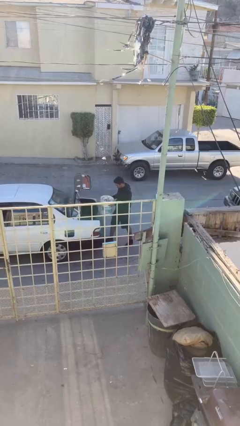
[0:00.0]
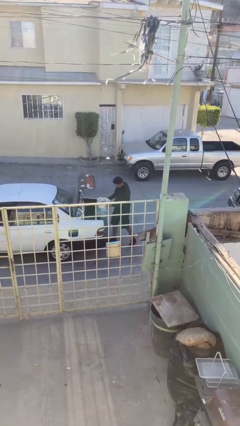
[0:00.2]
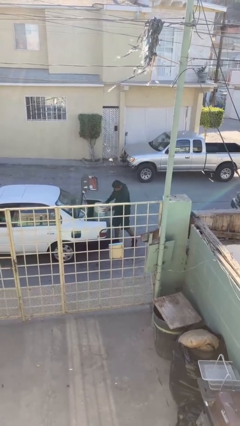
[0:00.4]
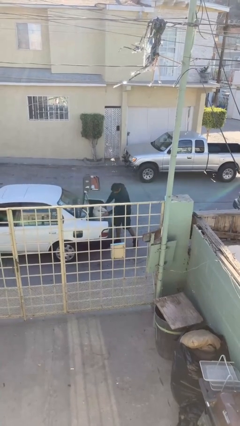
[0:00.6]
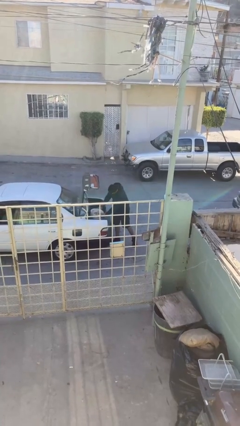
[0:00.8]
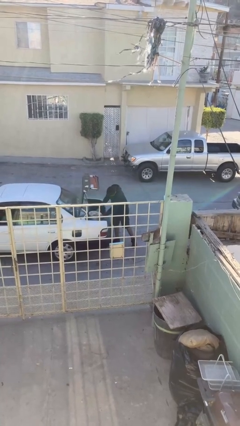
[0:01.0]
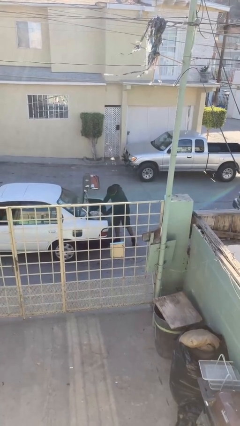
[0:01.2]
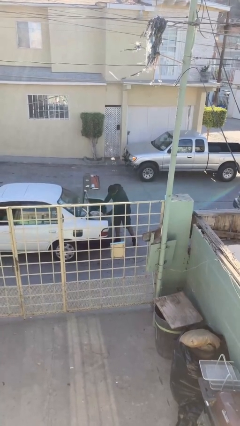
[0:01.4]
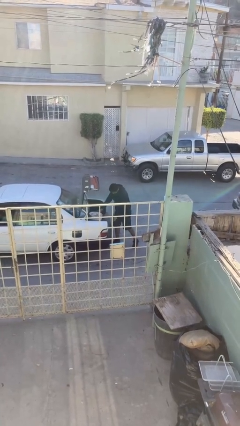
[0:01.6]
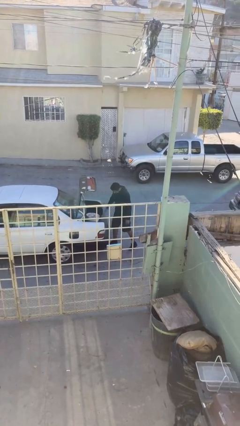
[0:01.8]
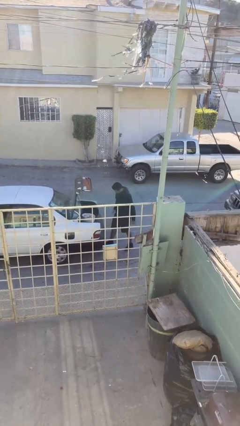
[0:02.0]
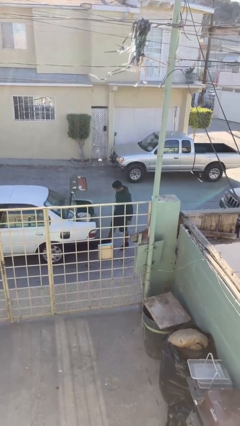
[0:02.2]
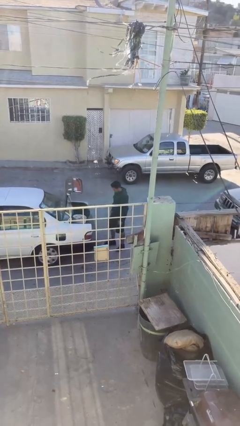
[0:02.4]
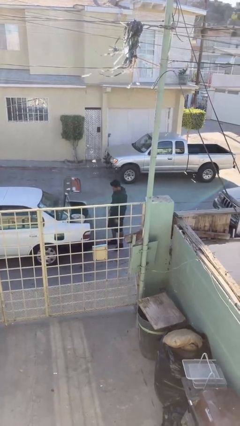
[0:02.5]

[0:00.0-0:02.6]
person loads car

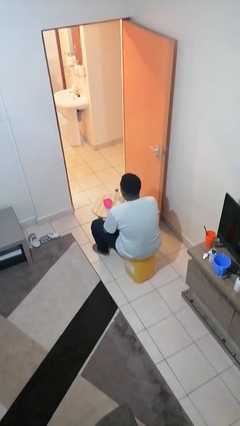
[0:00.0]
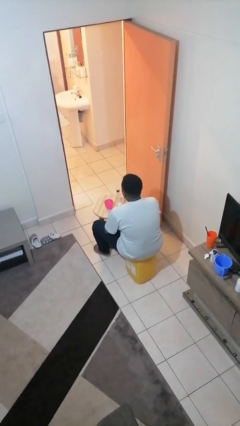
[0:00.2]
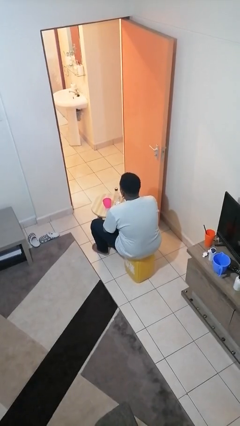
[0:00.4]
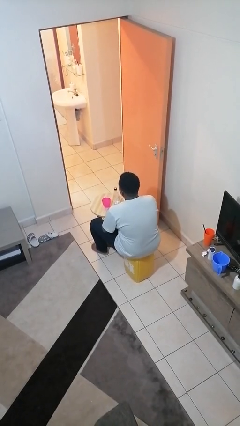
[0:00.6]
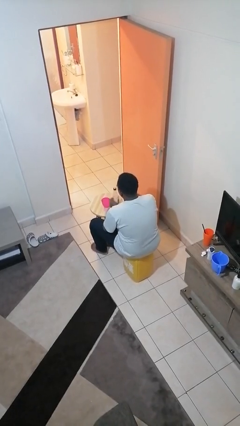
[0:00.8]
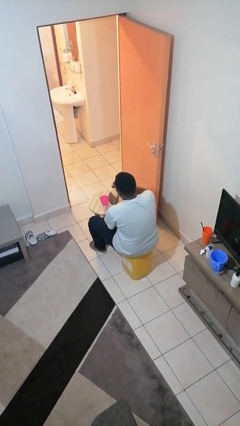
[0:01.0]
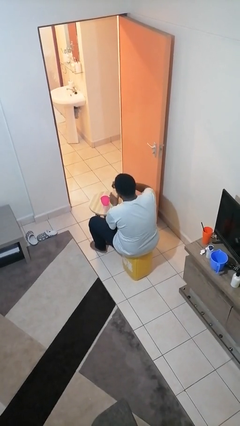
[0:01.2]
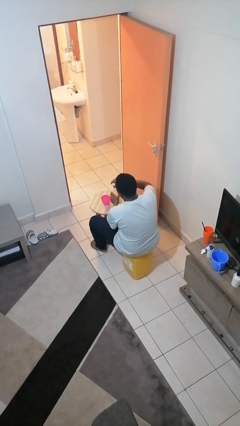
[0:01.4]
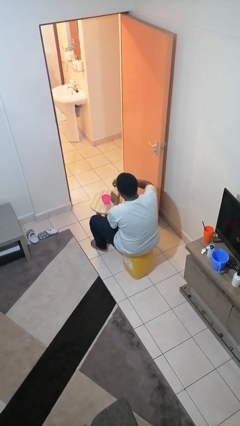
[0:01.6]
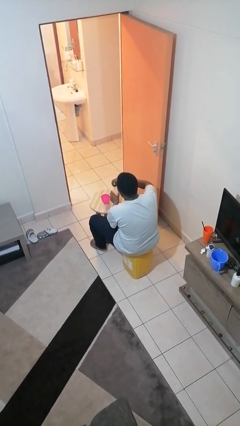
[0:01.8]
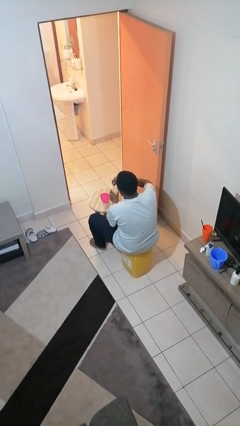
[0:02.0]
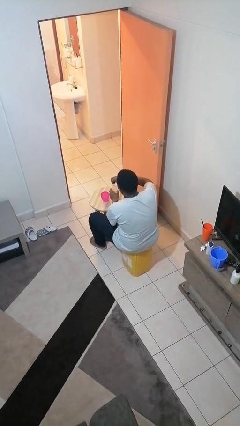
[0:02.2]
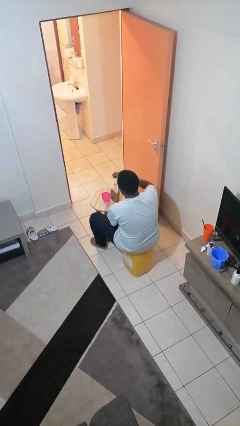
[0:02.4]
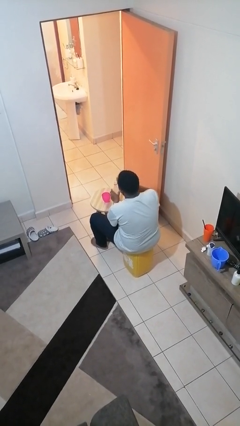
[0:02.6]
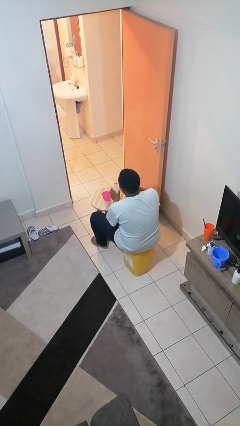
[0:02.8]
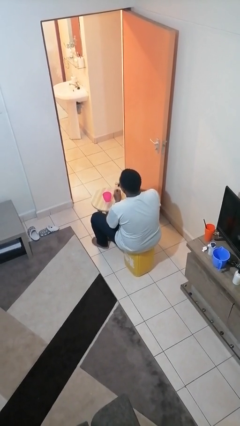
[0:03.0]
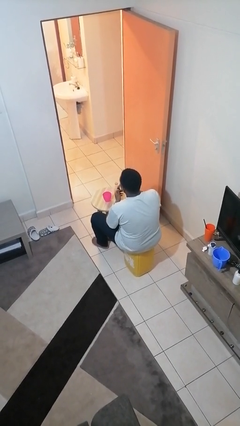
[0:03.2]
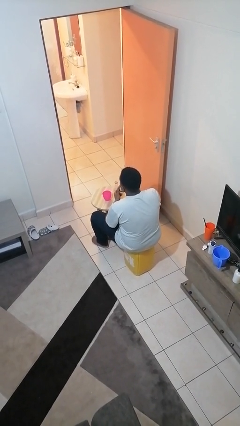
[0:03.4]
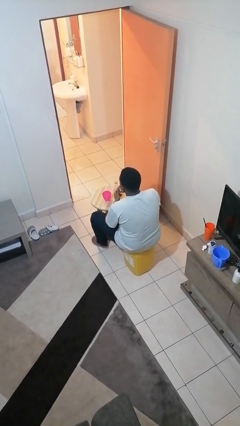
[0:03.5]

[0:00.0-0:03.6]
person unscrews lid from bottle

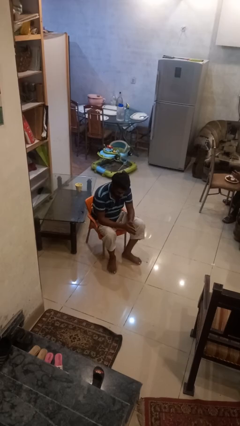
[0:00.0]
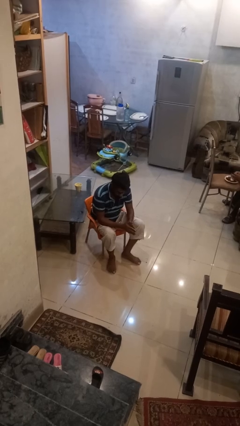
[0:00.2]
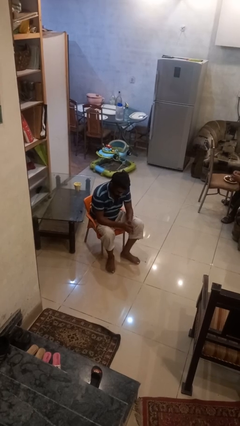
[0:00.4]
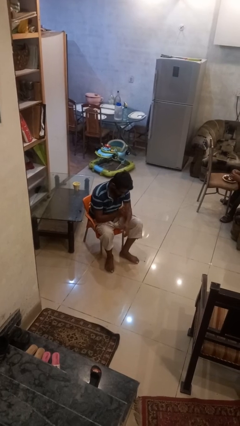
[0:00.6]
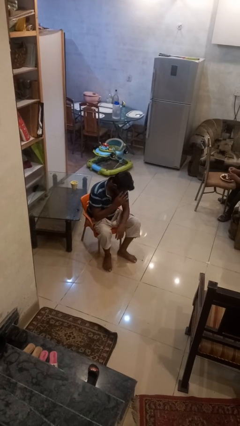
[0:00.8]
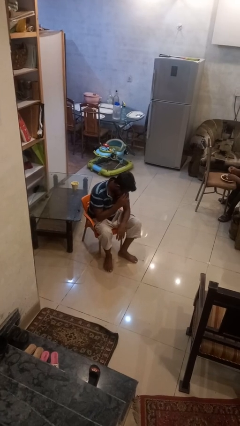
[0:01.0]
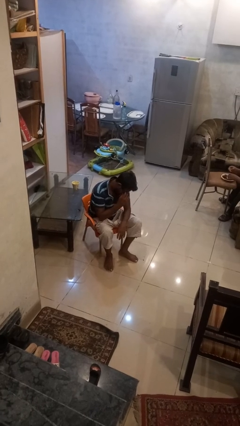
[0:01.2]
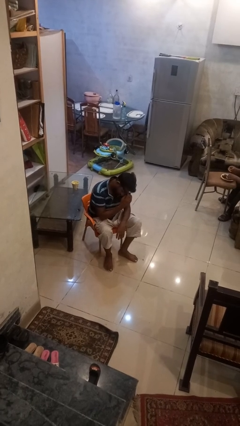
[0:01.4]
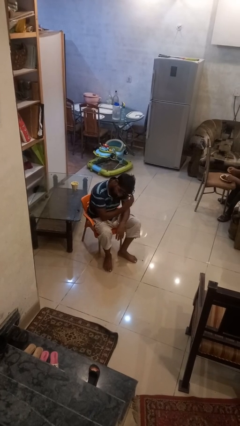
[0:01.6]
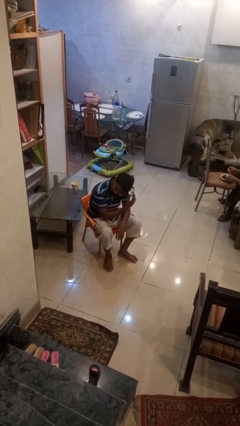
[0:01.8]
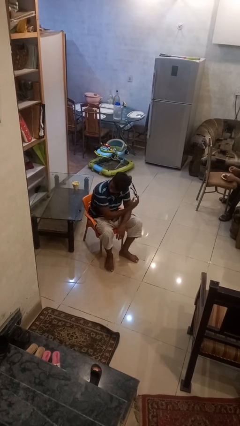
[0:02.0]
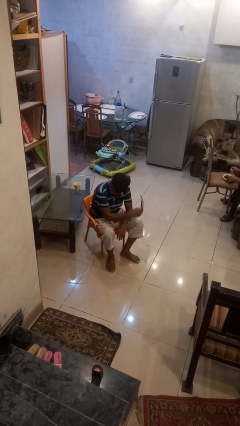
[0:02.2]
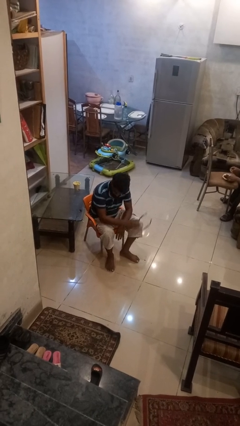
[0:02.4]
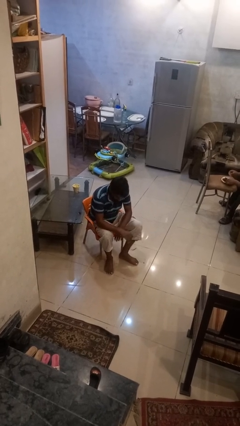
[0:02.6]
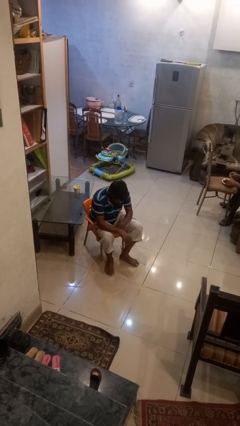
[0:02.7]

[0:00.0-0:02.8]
person takes off glasses

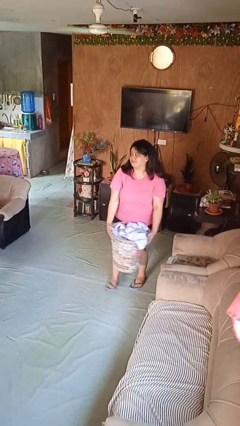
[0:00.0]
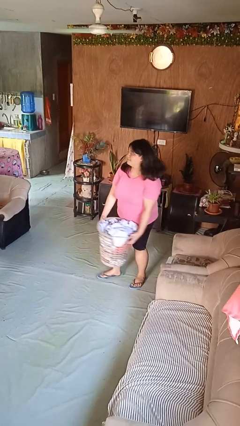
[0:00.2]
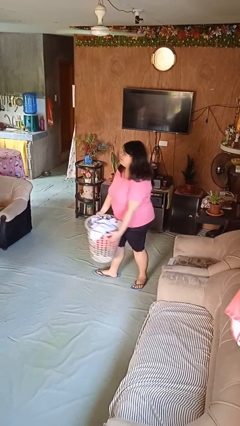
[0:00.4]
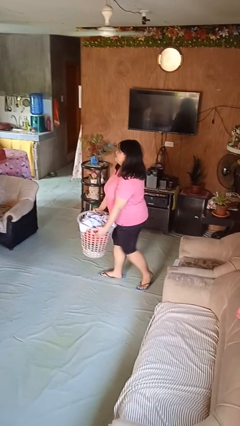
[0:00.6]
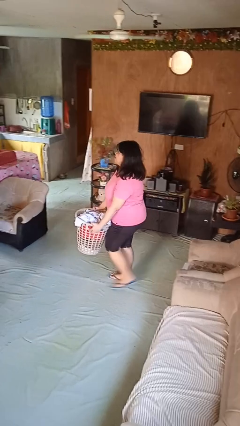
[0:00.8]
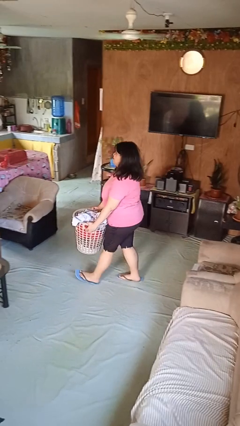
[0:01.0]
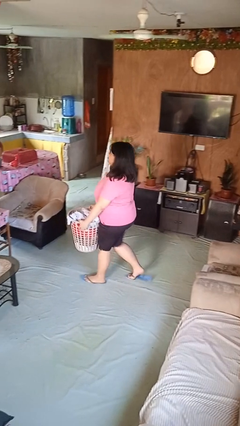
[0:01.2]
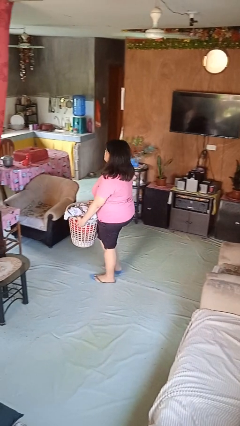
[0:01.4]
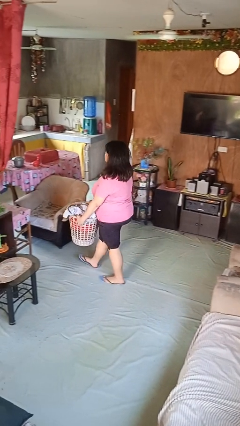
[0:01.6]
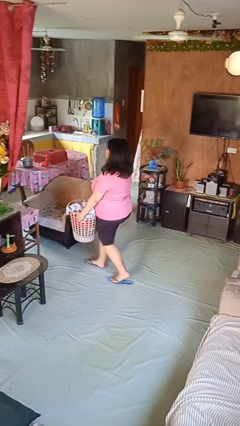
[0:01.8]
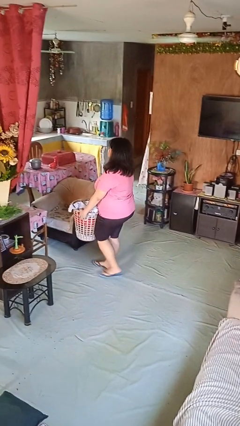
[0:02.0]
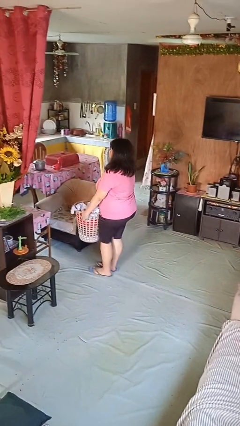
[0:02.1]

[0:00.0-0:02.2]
person carries laundry basket

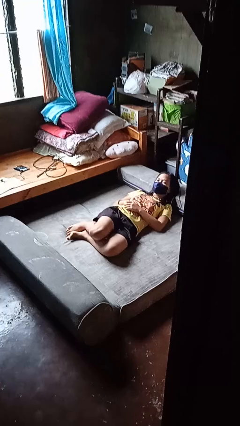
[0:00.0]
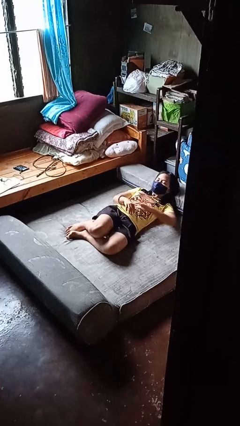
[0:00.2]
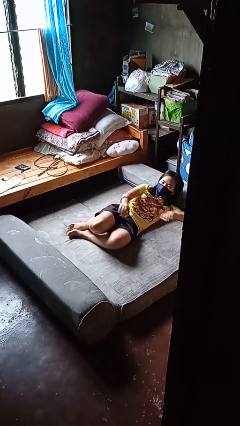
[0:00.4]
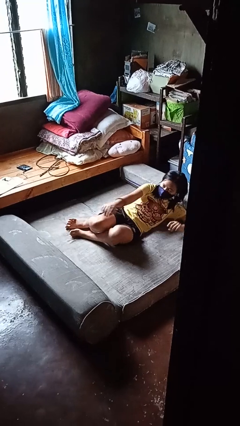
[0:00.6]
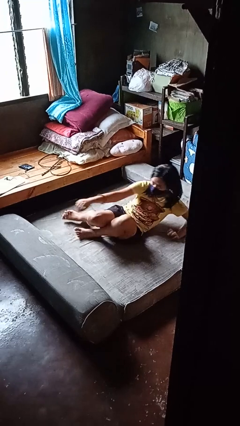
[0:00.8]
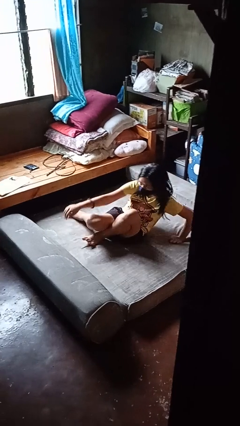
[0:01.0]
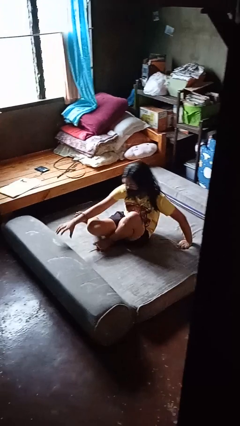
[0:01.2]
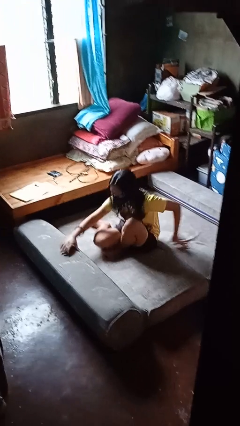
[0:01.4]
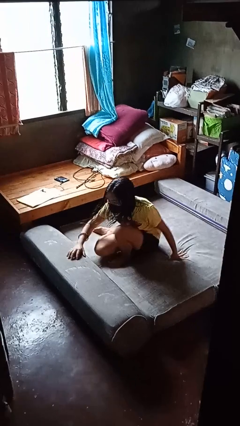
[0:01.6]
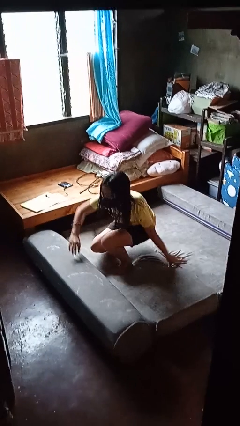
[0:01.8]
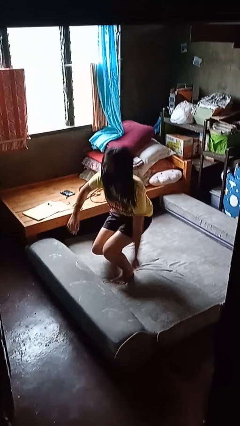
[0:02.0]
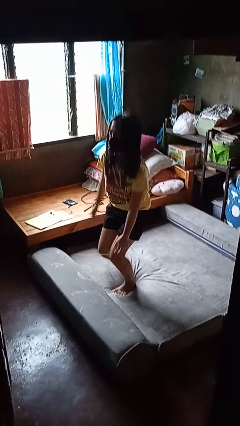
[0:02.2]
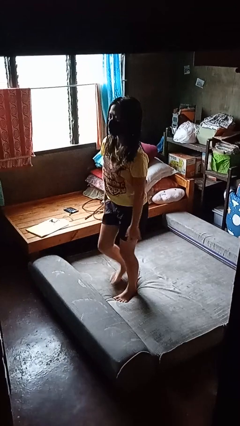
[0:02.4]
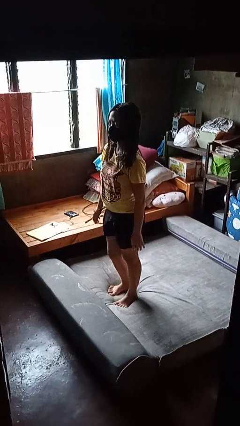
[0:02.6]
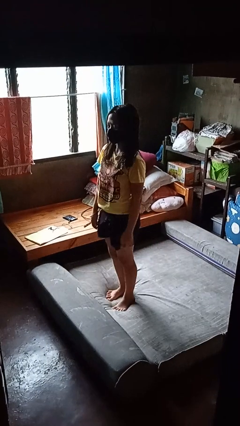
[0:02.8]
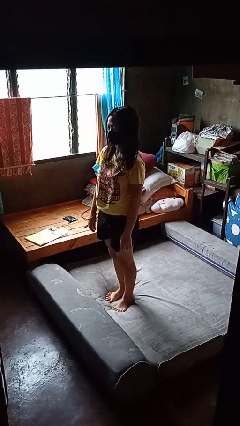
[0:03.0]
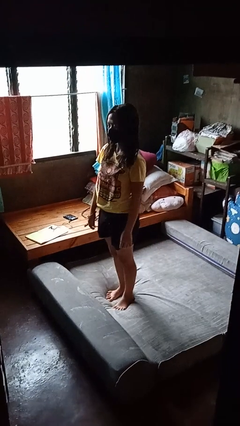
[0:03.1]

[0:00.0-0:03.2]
person stands up

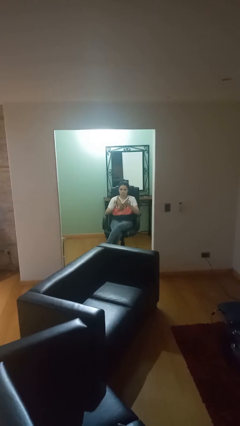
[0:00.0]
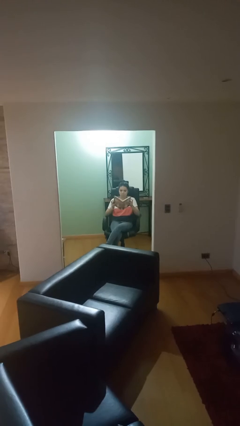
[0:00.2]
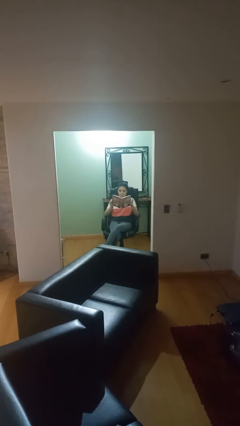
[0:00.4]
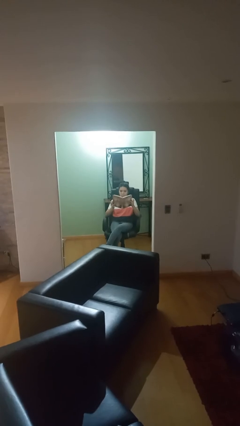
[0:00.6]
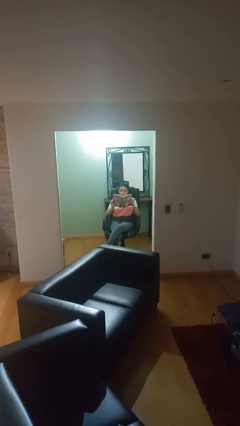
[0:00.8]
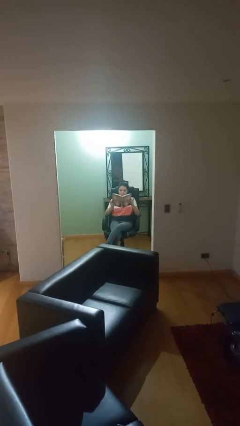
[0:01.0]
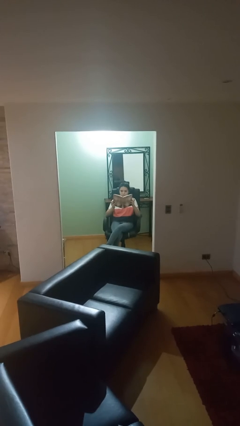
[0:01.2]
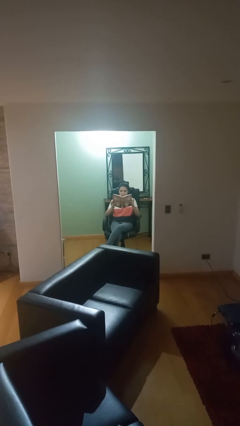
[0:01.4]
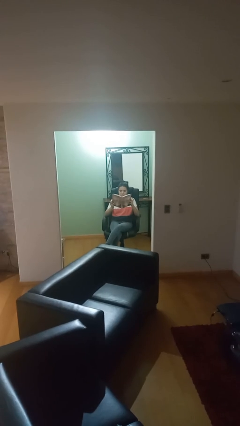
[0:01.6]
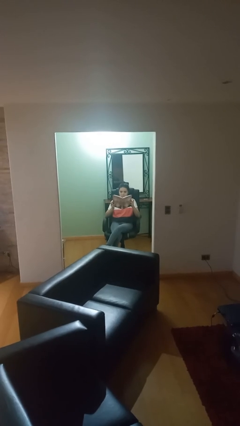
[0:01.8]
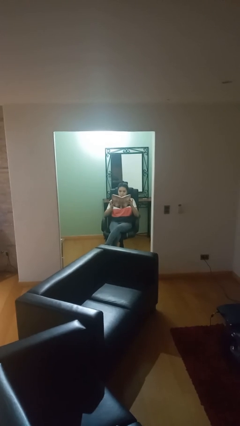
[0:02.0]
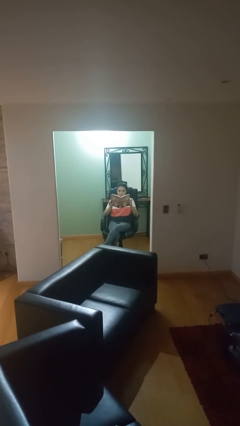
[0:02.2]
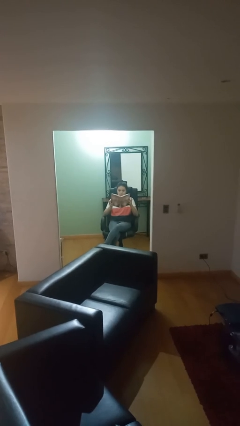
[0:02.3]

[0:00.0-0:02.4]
person reads document

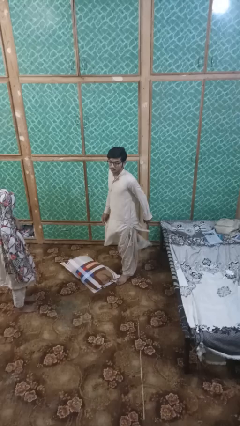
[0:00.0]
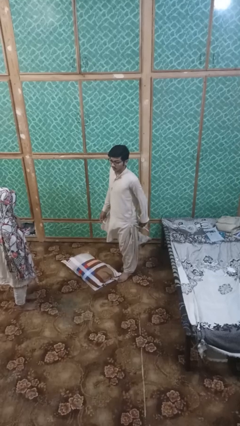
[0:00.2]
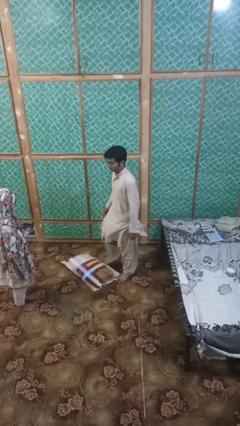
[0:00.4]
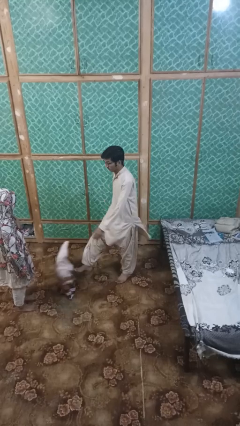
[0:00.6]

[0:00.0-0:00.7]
person kicks object to person
